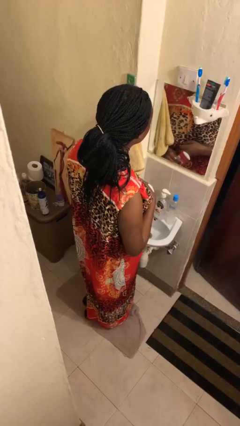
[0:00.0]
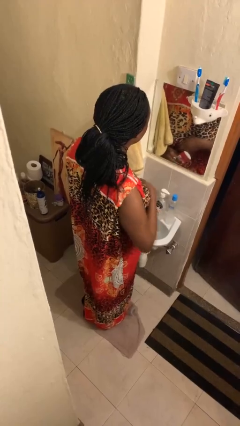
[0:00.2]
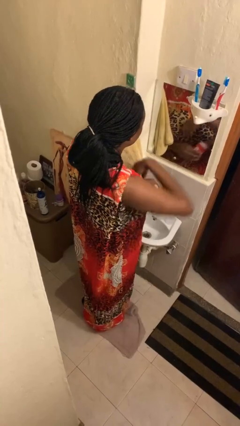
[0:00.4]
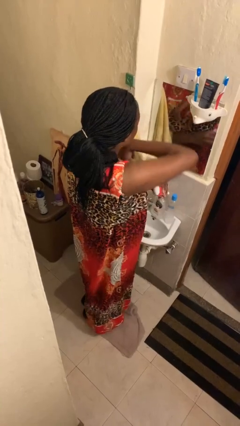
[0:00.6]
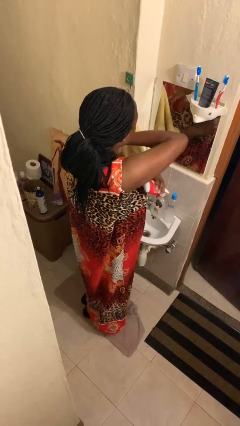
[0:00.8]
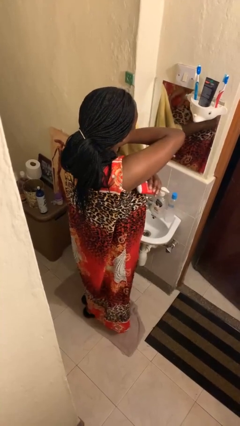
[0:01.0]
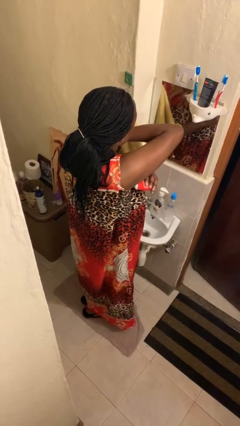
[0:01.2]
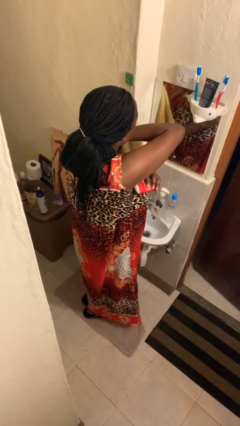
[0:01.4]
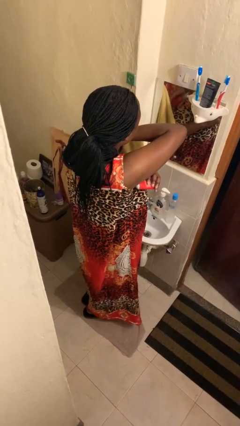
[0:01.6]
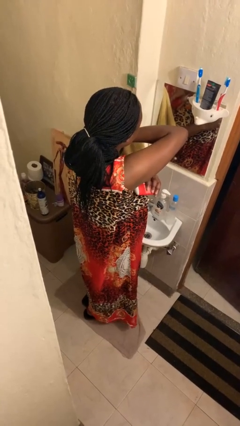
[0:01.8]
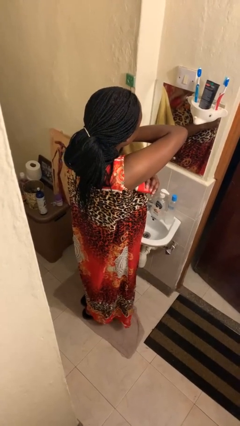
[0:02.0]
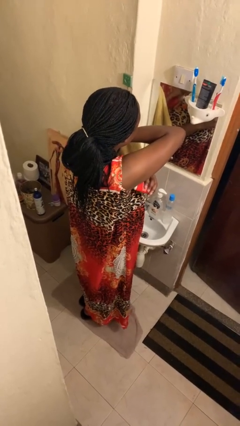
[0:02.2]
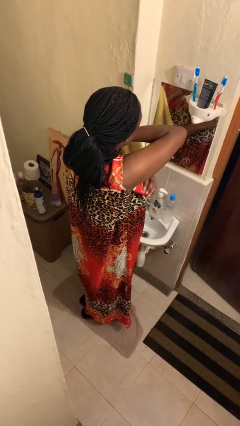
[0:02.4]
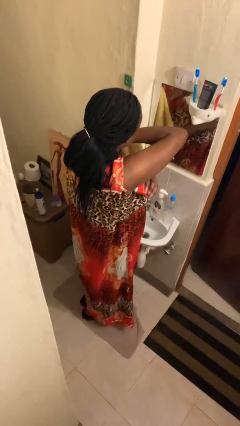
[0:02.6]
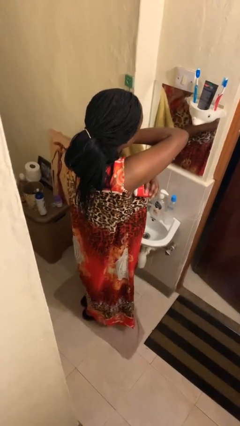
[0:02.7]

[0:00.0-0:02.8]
person applies deodorant

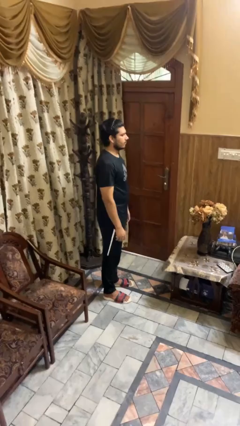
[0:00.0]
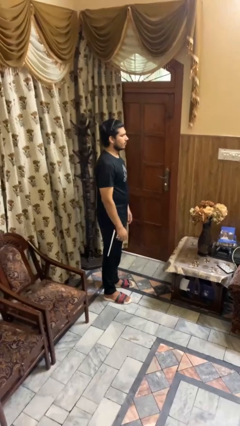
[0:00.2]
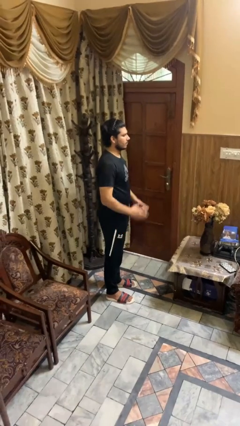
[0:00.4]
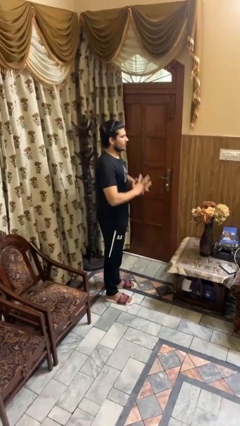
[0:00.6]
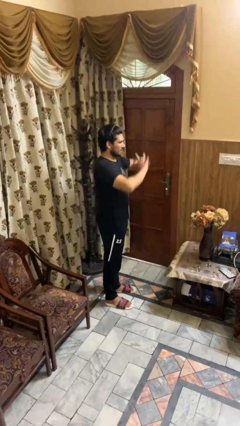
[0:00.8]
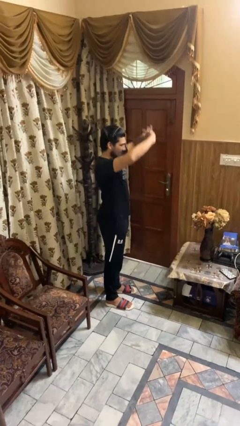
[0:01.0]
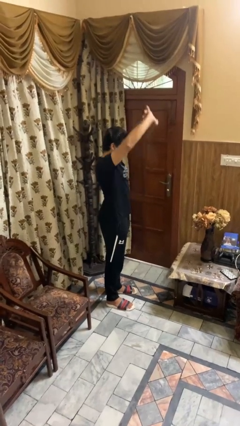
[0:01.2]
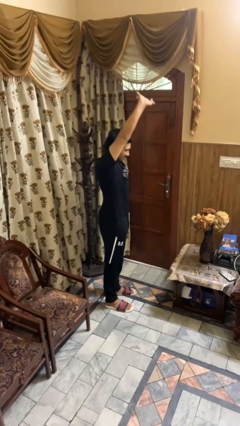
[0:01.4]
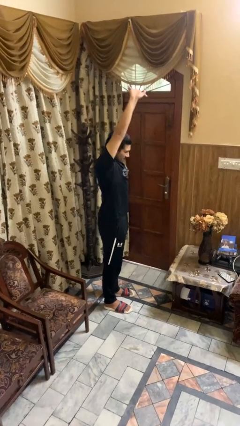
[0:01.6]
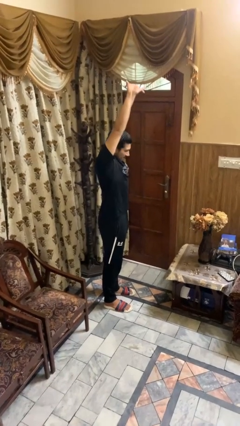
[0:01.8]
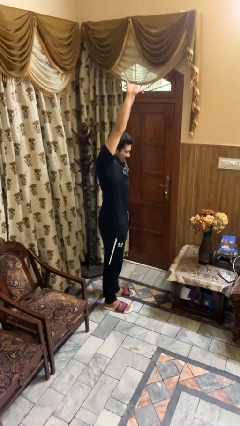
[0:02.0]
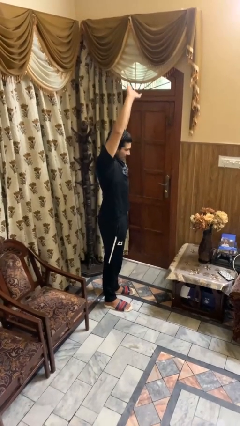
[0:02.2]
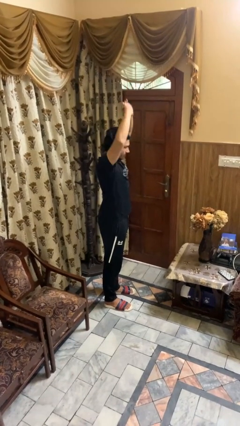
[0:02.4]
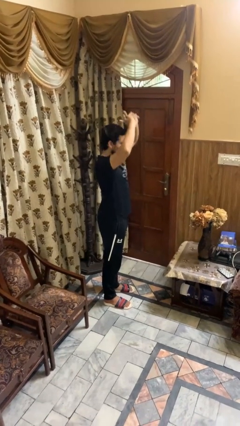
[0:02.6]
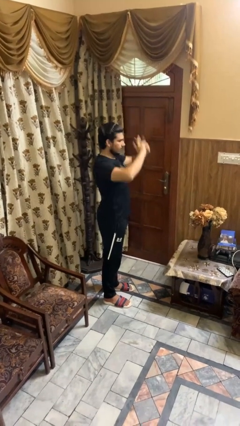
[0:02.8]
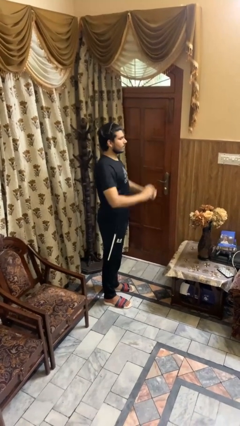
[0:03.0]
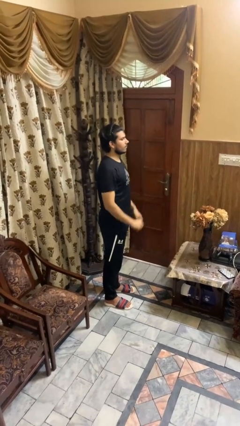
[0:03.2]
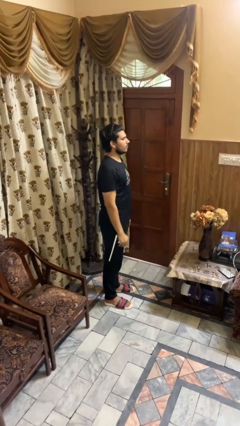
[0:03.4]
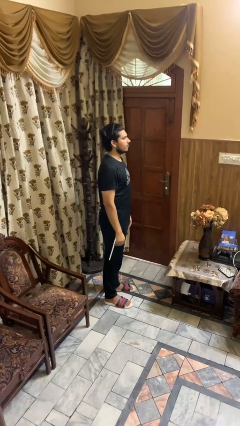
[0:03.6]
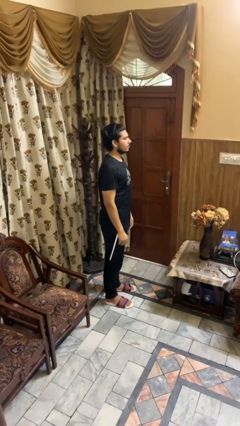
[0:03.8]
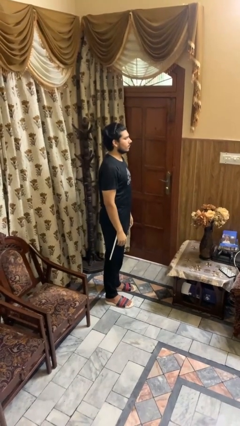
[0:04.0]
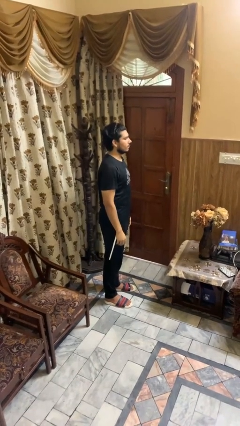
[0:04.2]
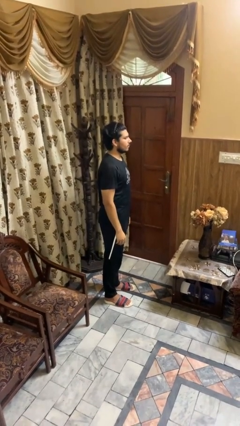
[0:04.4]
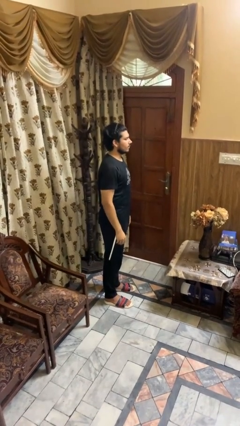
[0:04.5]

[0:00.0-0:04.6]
person stretches arms over head

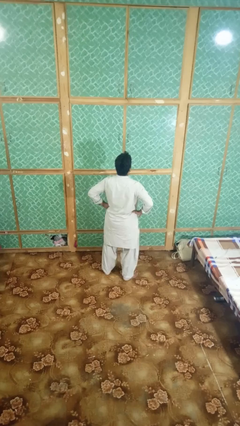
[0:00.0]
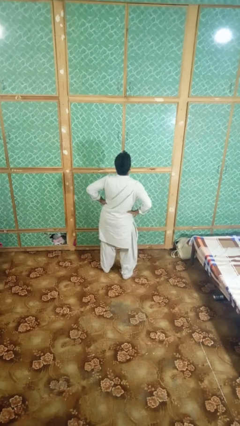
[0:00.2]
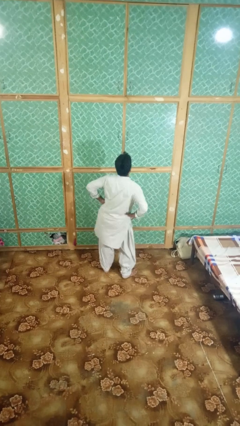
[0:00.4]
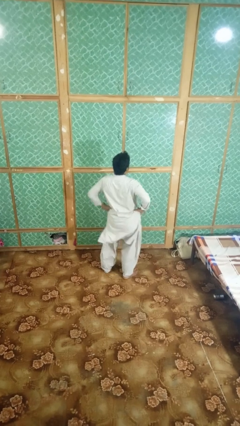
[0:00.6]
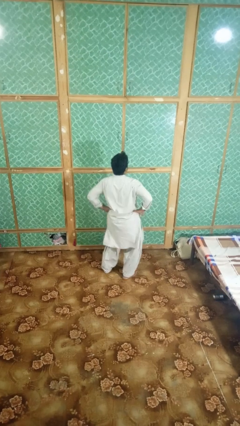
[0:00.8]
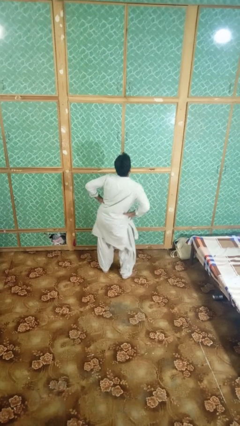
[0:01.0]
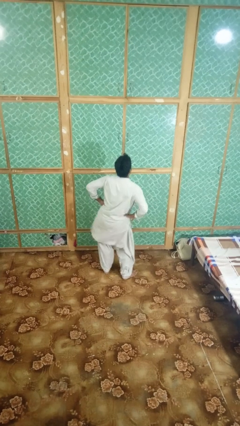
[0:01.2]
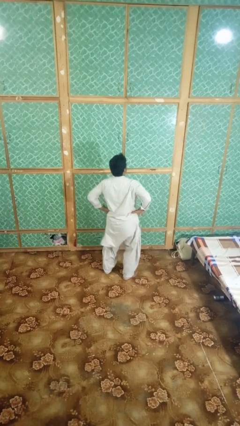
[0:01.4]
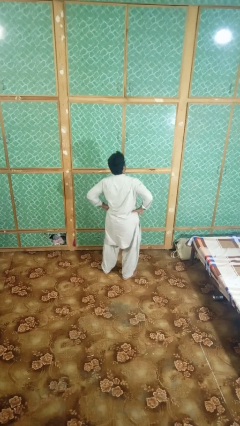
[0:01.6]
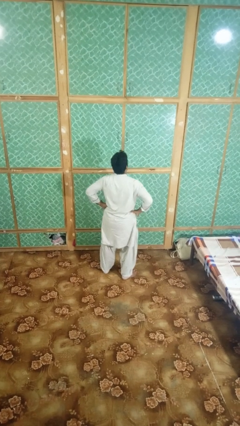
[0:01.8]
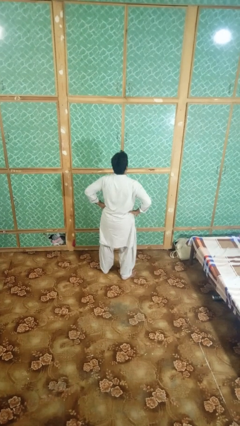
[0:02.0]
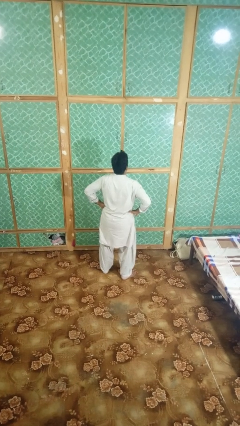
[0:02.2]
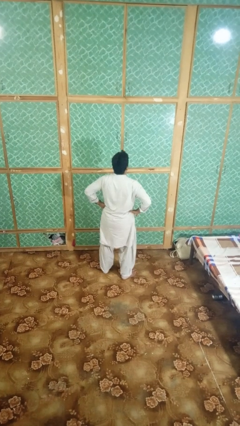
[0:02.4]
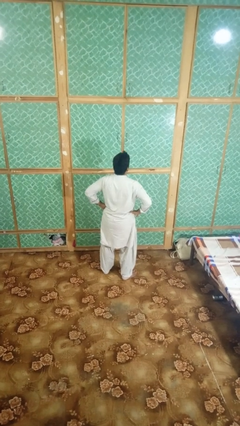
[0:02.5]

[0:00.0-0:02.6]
person wiggles hips

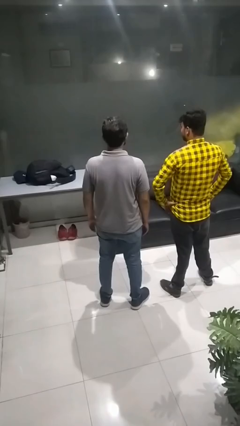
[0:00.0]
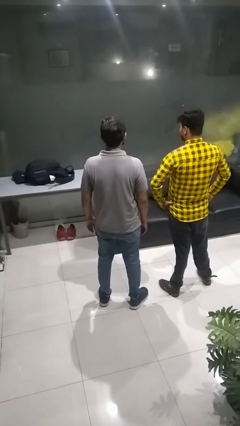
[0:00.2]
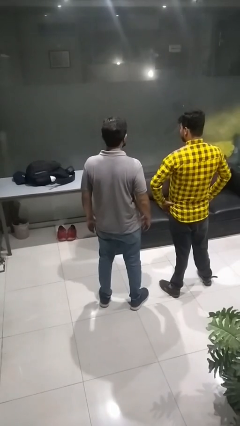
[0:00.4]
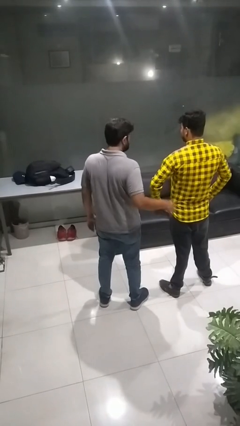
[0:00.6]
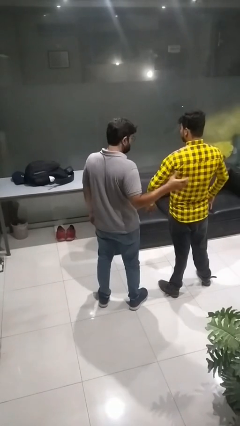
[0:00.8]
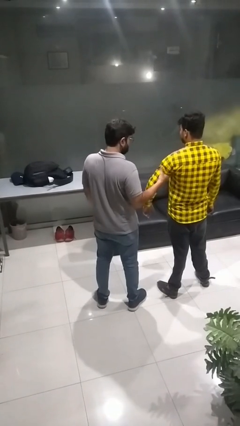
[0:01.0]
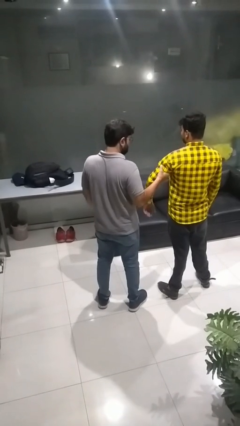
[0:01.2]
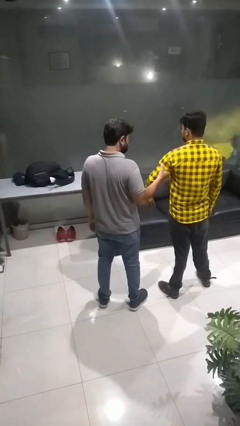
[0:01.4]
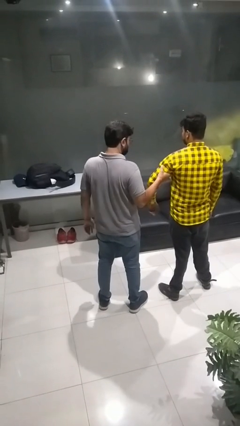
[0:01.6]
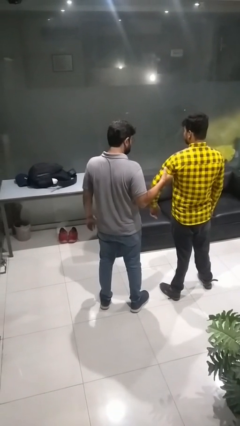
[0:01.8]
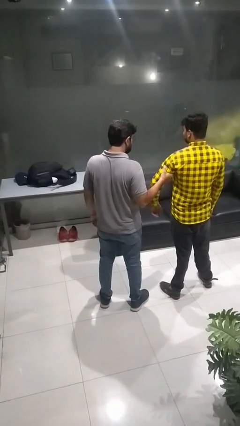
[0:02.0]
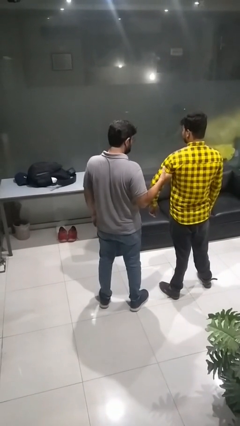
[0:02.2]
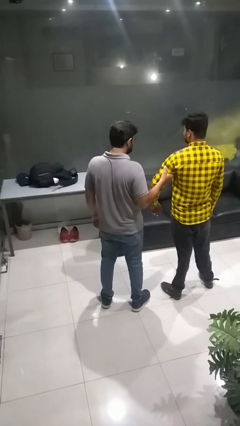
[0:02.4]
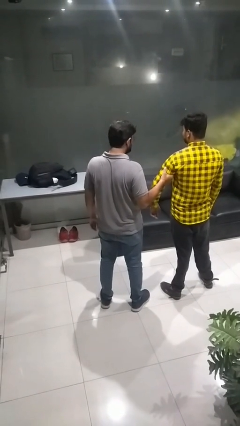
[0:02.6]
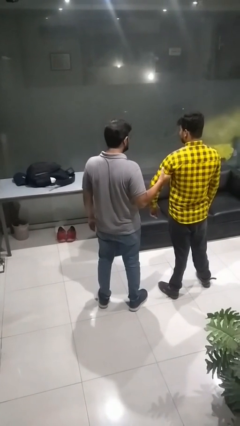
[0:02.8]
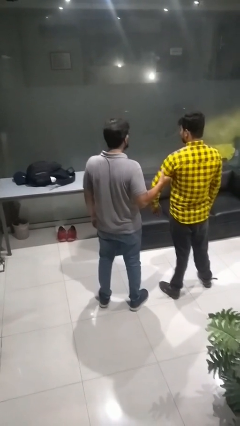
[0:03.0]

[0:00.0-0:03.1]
person grabs person by bicep

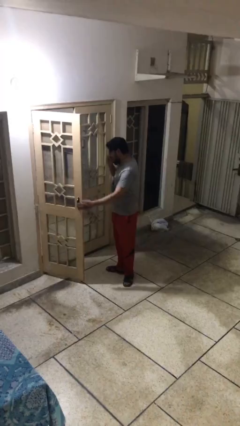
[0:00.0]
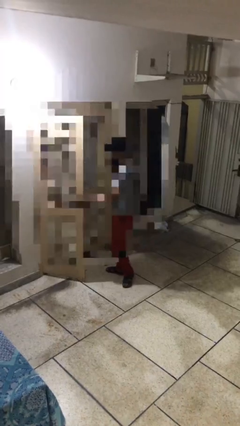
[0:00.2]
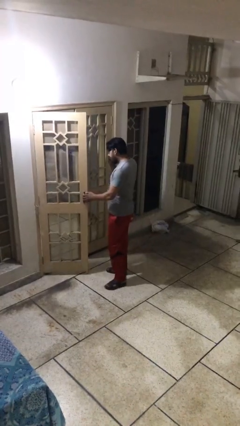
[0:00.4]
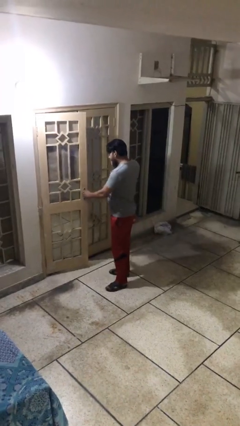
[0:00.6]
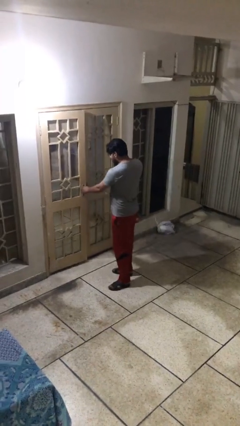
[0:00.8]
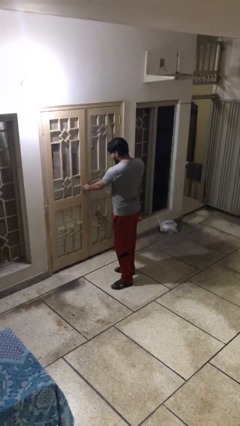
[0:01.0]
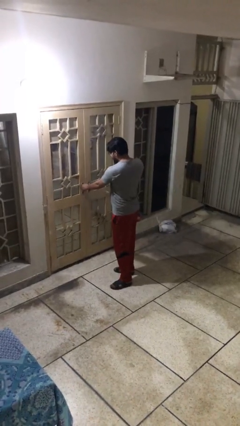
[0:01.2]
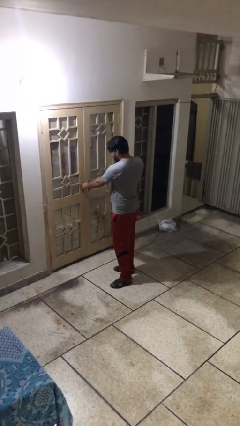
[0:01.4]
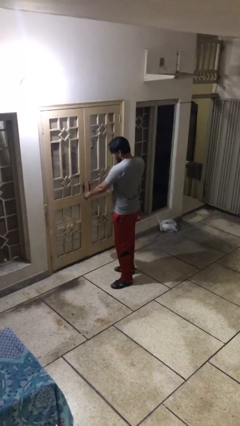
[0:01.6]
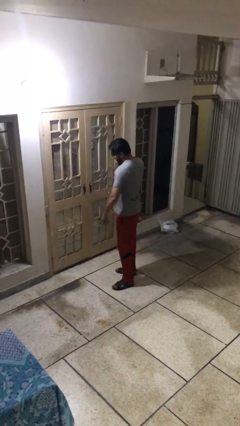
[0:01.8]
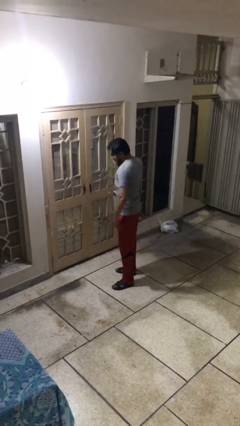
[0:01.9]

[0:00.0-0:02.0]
person closes facility door

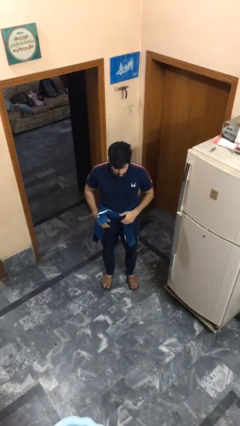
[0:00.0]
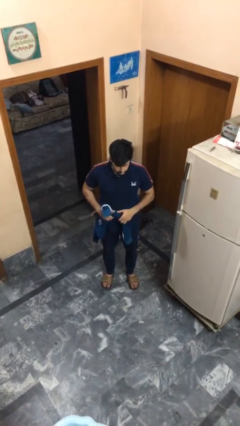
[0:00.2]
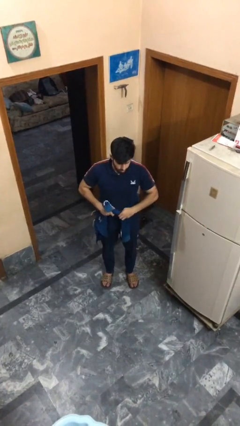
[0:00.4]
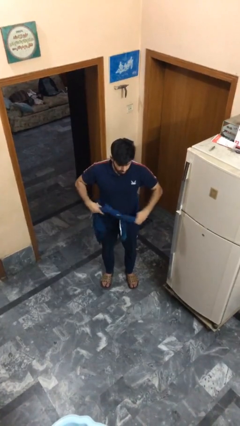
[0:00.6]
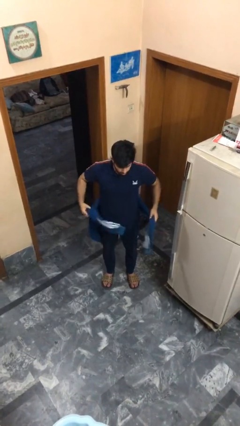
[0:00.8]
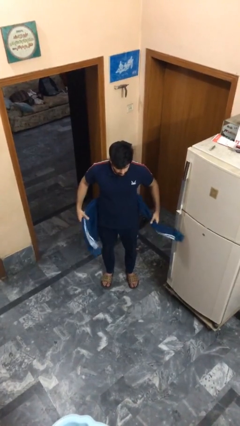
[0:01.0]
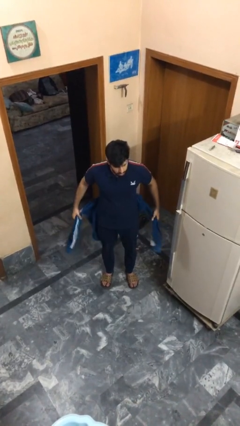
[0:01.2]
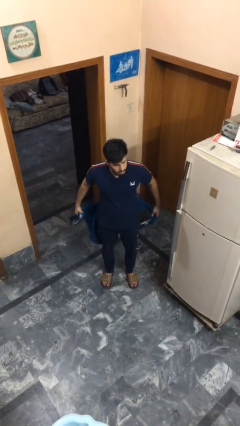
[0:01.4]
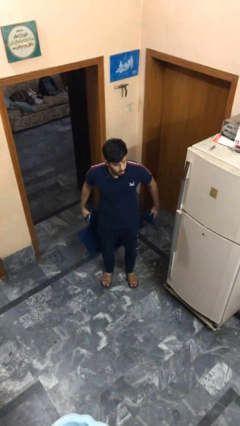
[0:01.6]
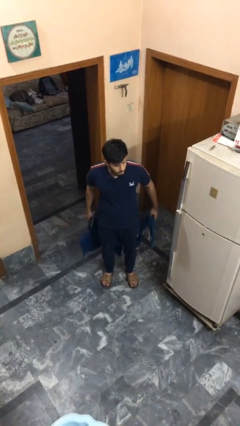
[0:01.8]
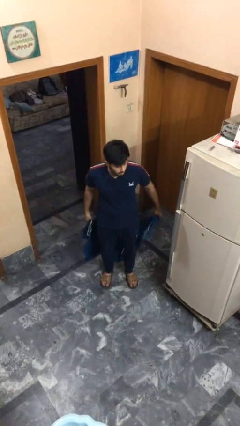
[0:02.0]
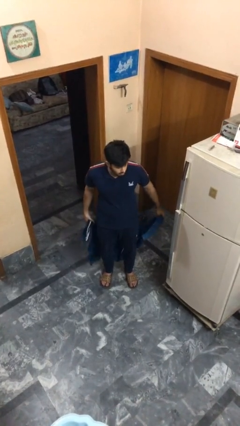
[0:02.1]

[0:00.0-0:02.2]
person unties jacket around waist
